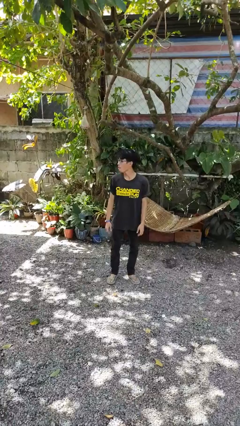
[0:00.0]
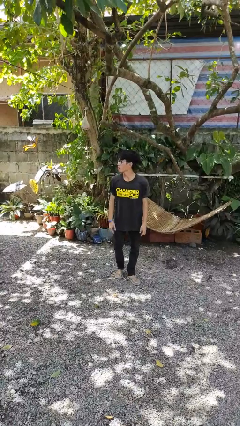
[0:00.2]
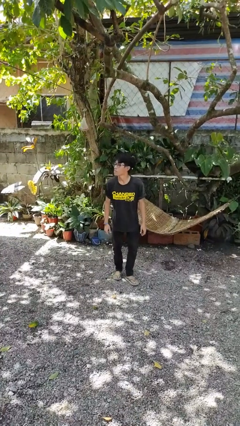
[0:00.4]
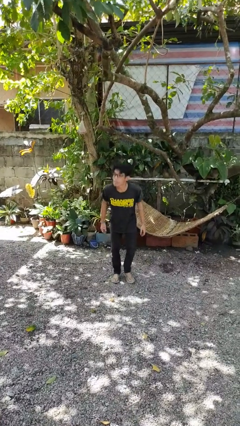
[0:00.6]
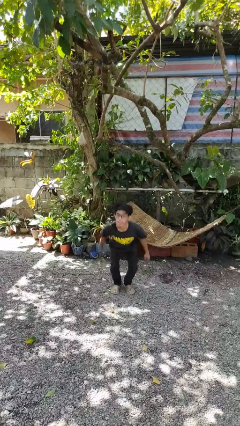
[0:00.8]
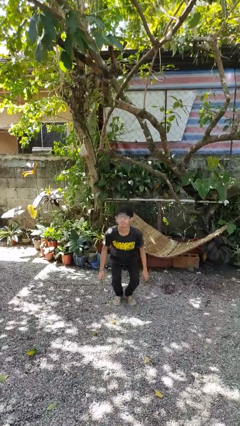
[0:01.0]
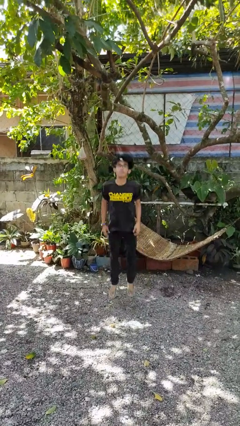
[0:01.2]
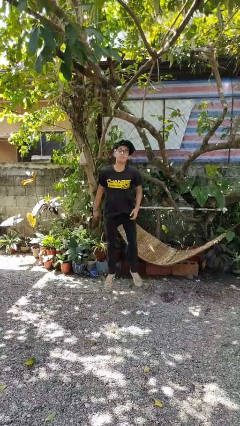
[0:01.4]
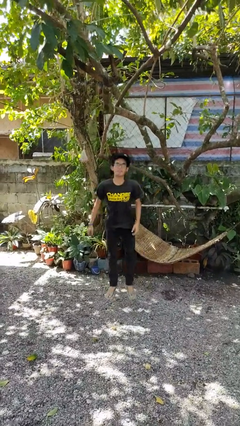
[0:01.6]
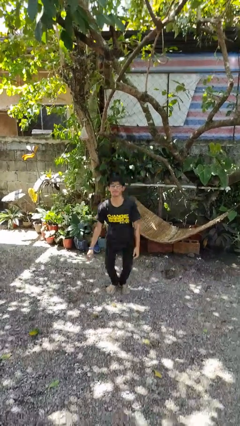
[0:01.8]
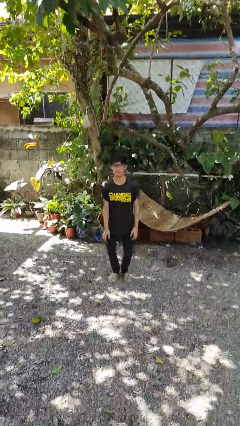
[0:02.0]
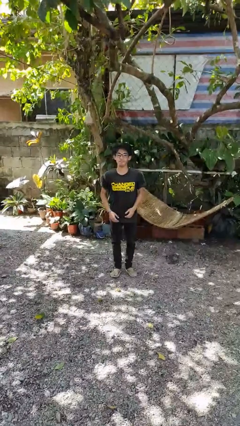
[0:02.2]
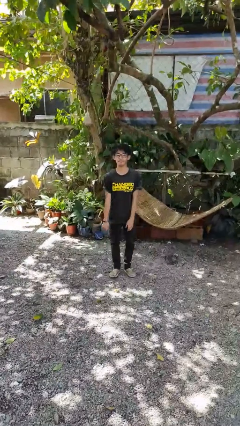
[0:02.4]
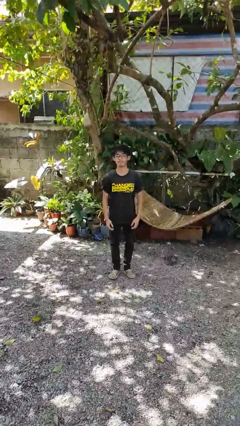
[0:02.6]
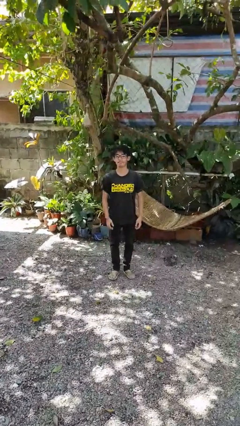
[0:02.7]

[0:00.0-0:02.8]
person jumps

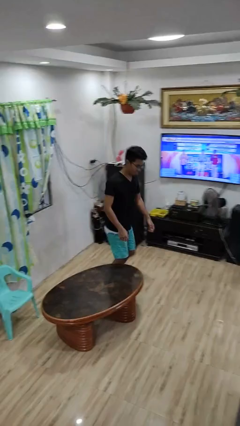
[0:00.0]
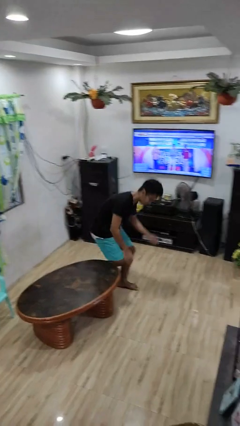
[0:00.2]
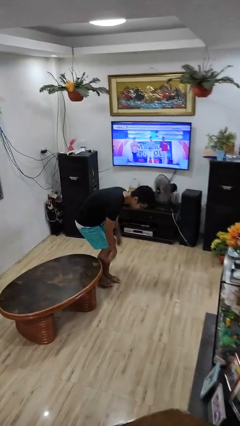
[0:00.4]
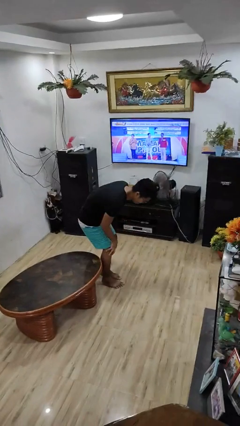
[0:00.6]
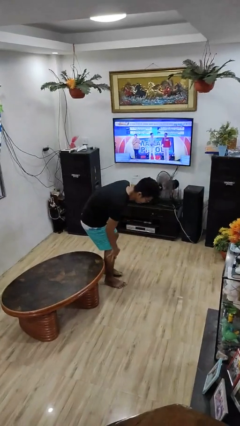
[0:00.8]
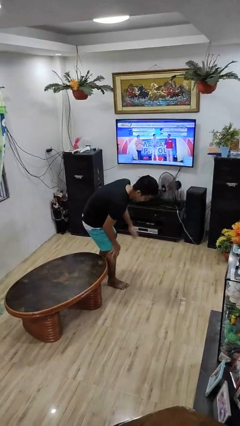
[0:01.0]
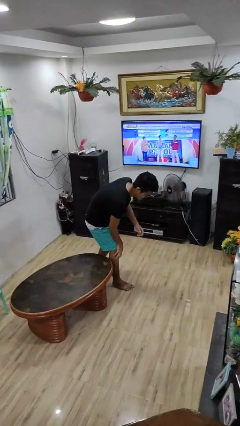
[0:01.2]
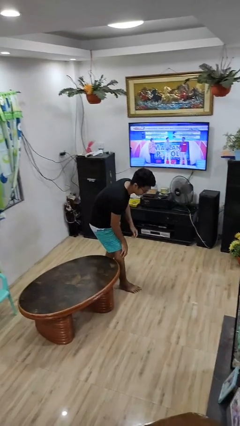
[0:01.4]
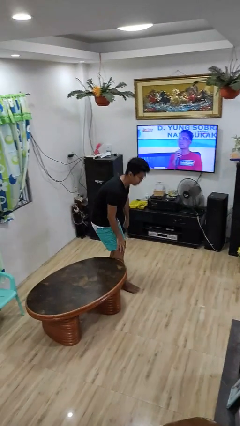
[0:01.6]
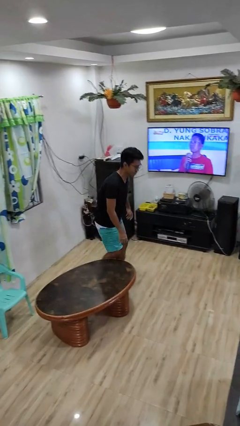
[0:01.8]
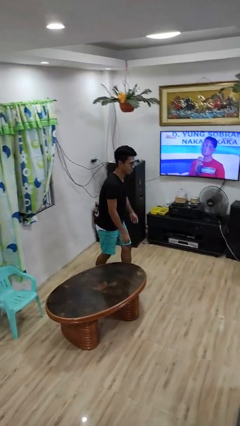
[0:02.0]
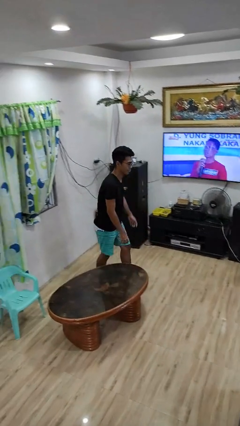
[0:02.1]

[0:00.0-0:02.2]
person bumps into table

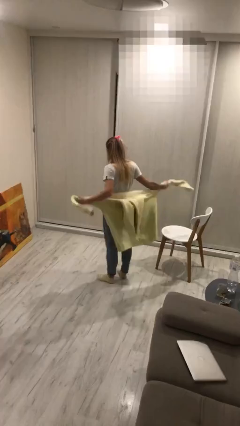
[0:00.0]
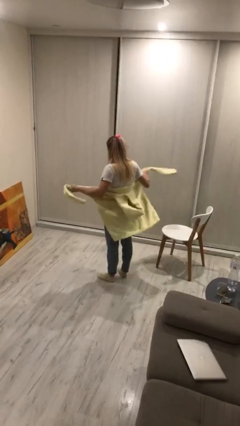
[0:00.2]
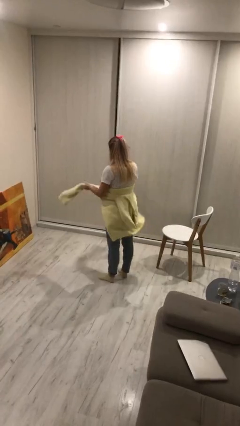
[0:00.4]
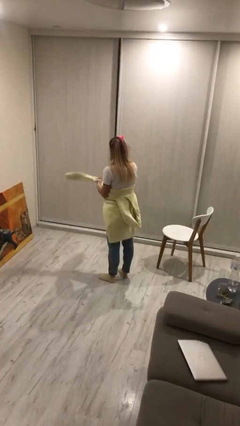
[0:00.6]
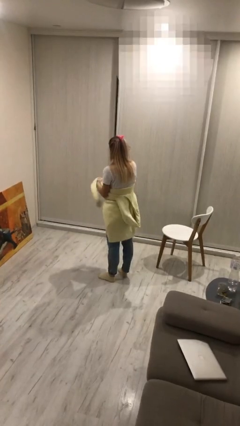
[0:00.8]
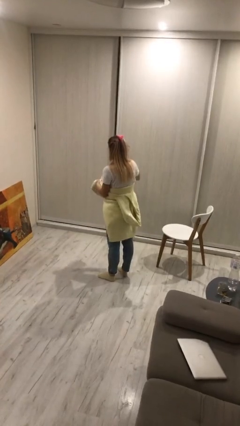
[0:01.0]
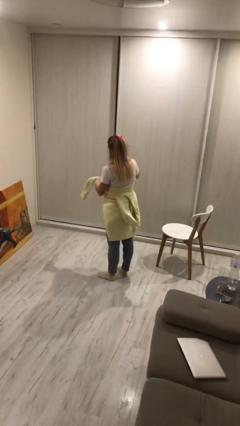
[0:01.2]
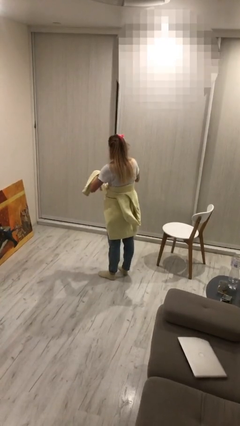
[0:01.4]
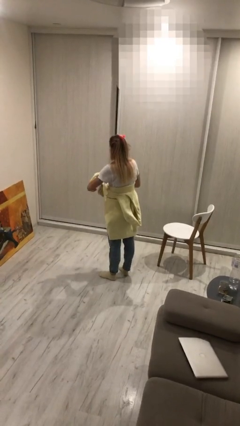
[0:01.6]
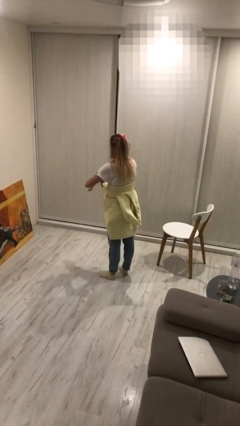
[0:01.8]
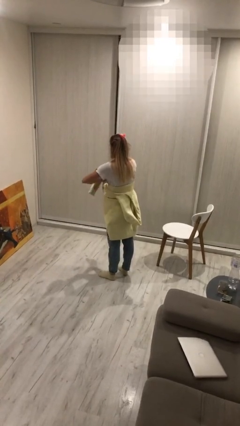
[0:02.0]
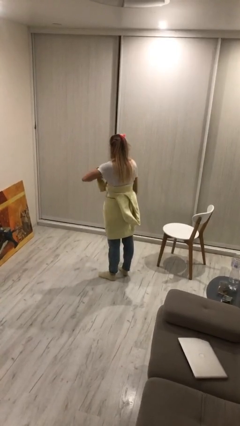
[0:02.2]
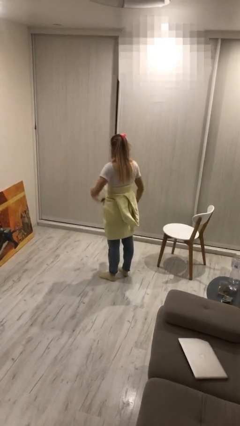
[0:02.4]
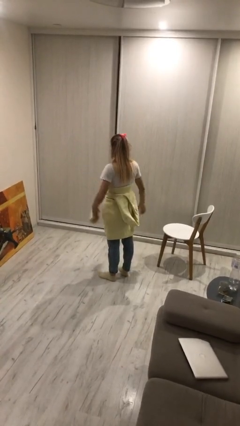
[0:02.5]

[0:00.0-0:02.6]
person ties jacket around waist

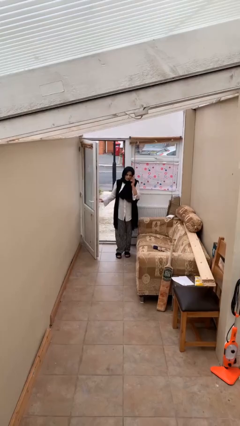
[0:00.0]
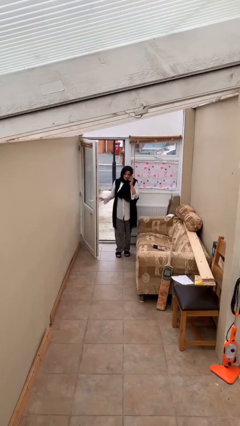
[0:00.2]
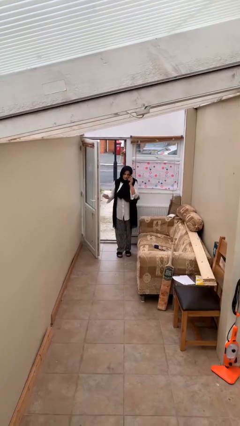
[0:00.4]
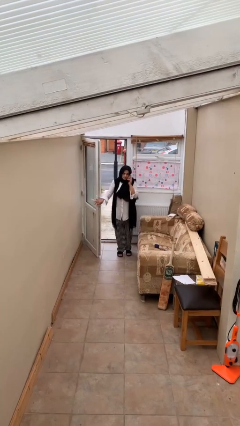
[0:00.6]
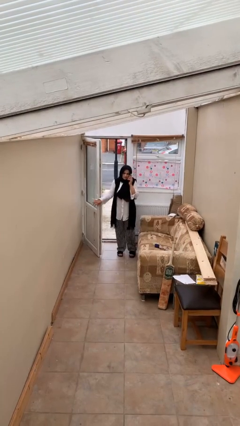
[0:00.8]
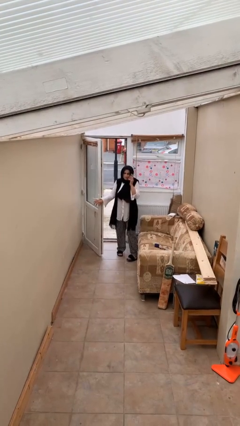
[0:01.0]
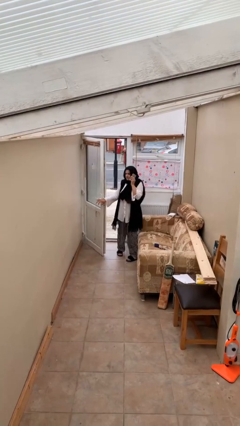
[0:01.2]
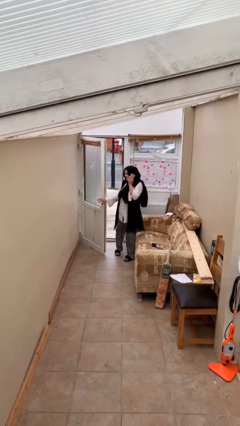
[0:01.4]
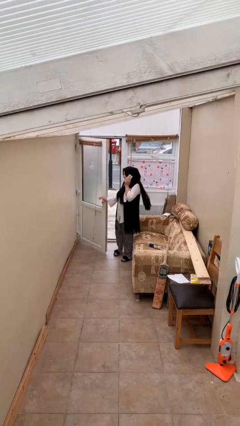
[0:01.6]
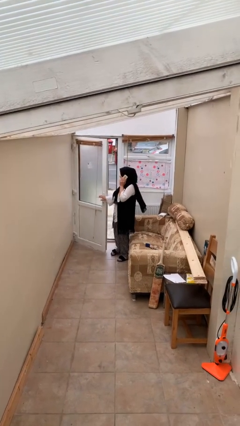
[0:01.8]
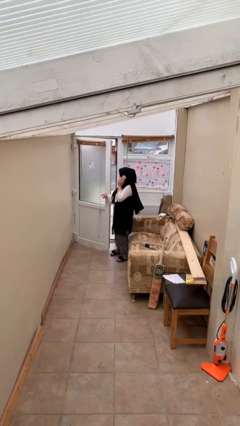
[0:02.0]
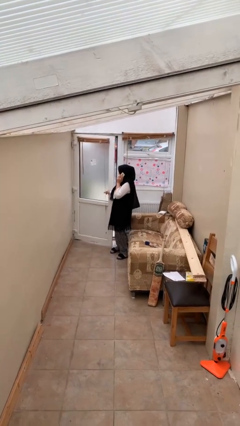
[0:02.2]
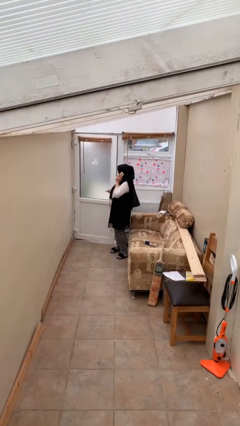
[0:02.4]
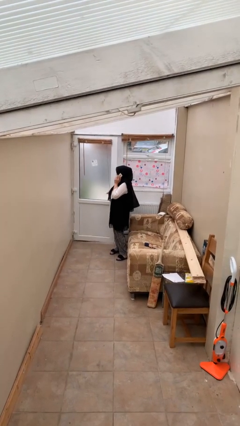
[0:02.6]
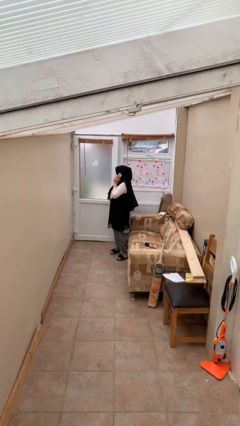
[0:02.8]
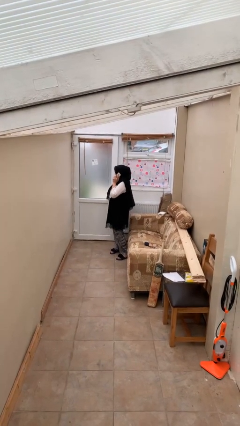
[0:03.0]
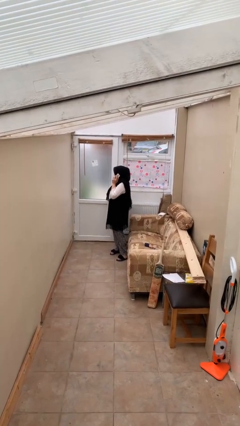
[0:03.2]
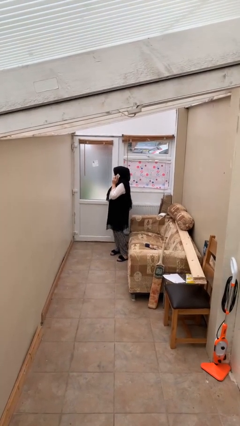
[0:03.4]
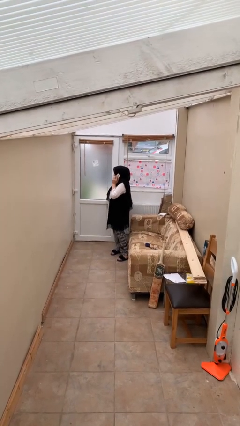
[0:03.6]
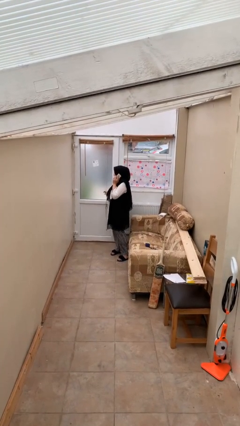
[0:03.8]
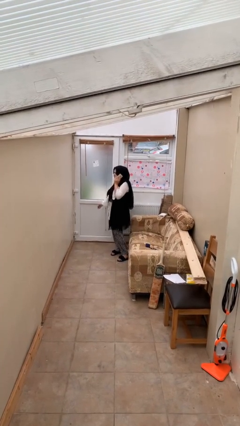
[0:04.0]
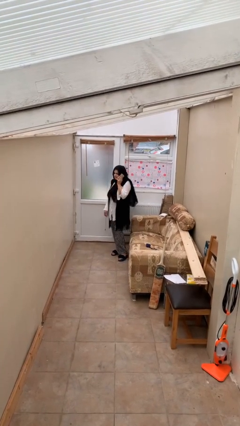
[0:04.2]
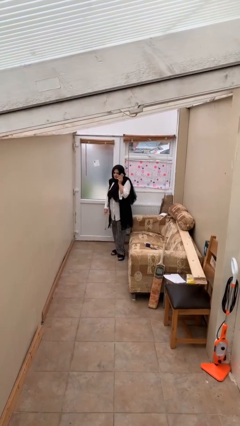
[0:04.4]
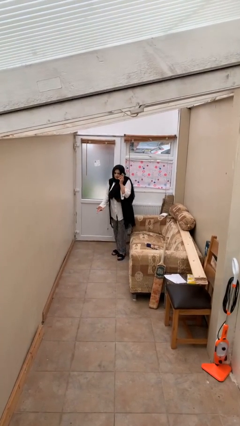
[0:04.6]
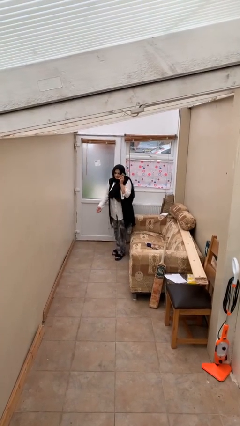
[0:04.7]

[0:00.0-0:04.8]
person closes facility door

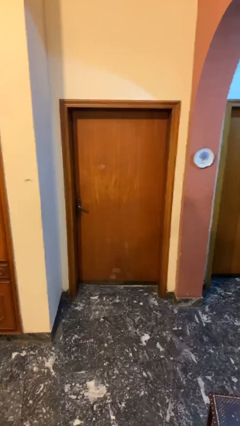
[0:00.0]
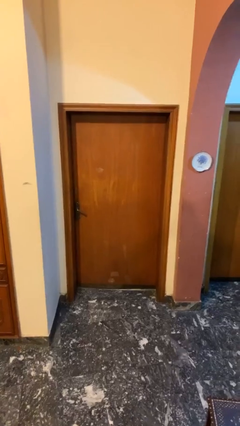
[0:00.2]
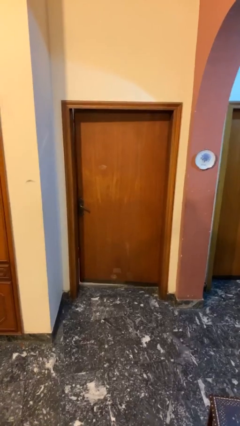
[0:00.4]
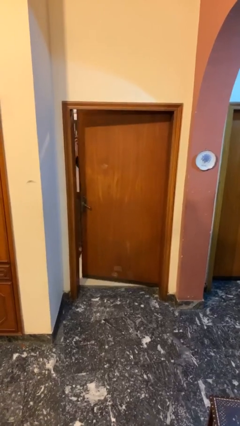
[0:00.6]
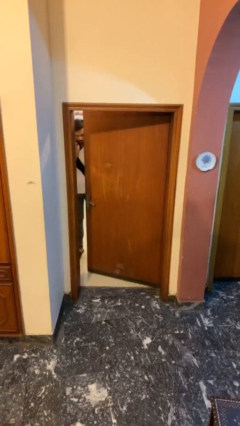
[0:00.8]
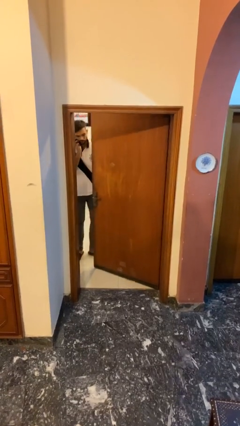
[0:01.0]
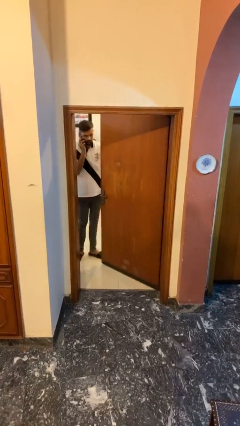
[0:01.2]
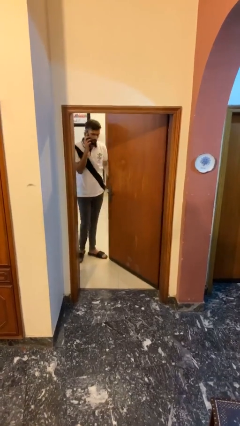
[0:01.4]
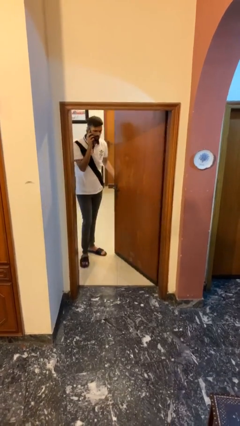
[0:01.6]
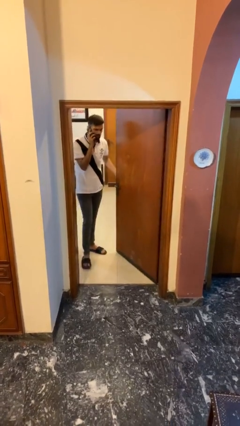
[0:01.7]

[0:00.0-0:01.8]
person opens facility door

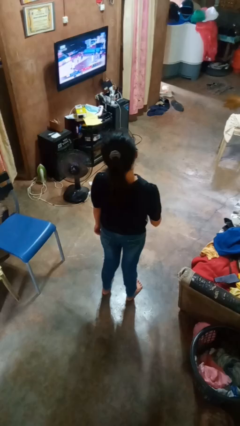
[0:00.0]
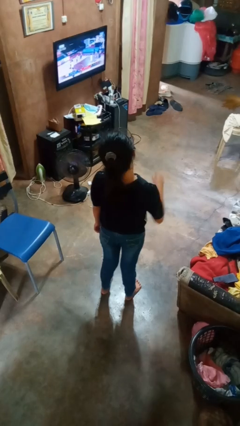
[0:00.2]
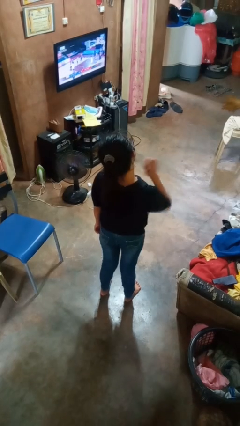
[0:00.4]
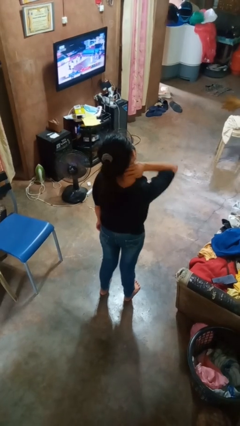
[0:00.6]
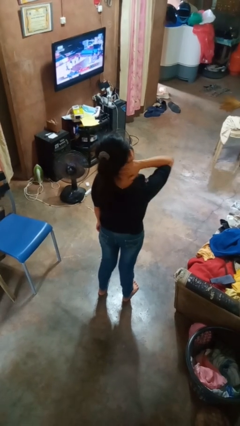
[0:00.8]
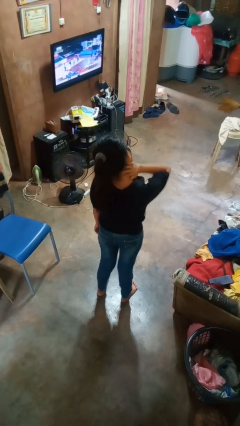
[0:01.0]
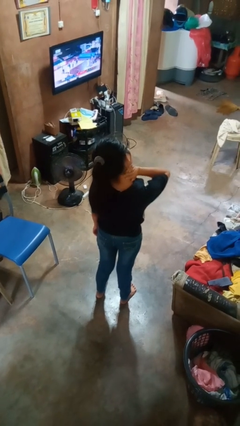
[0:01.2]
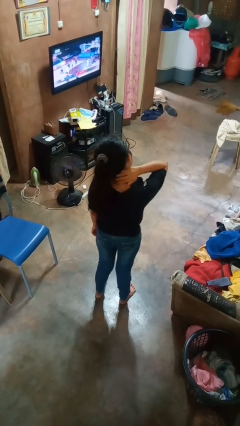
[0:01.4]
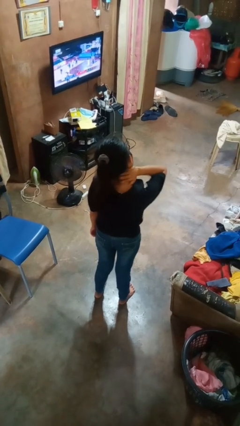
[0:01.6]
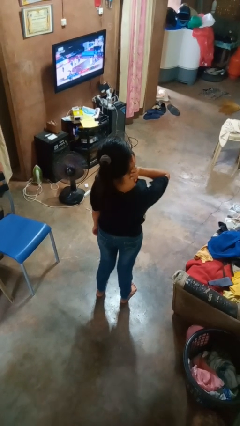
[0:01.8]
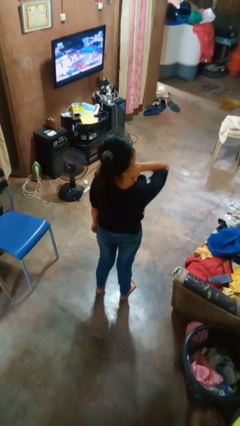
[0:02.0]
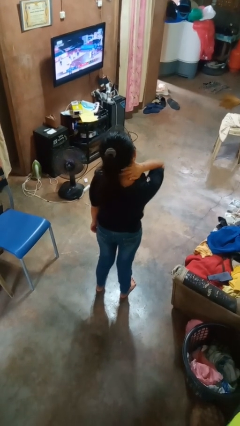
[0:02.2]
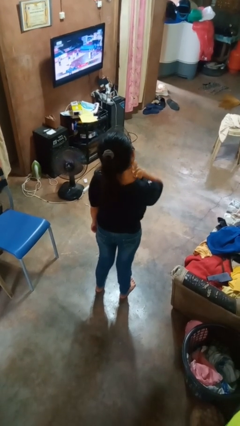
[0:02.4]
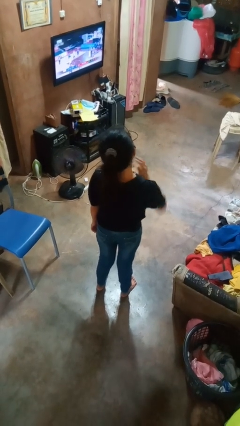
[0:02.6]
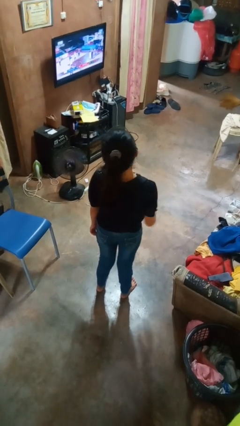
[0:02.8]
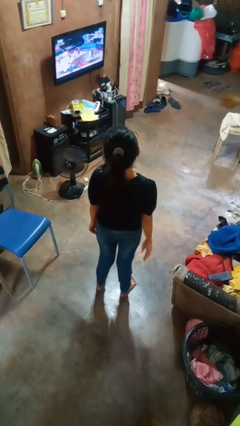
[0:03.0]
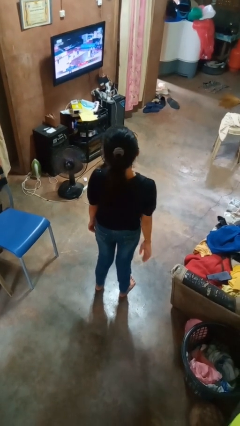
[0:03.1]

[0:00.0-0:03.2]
person rubs neck
